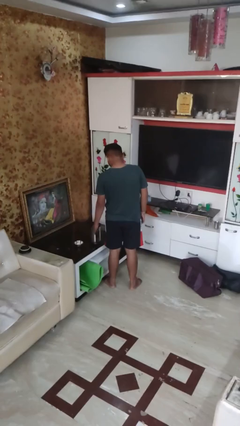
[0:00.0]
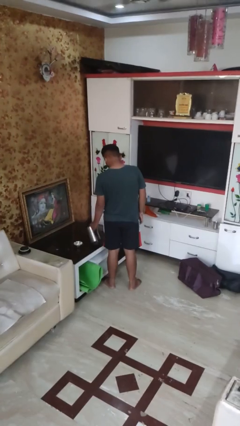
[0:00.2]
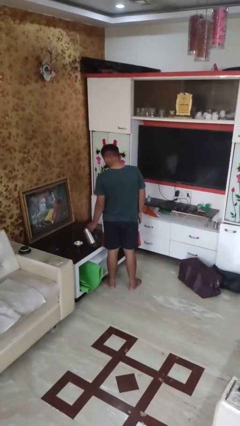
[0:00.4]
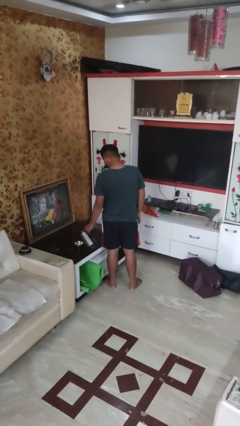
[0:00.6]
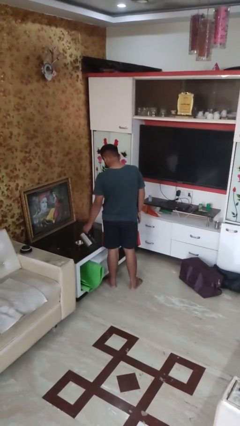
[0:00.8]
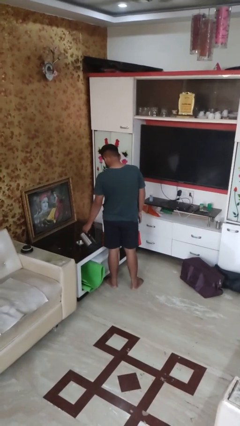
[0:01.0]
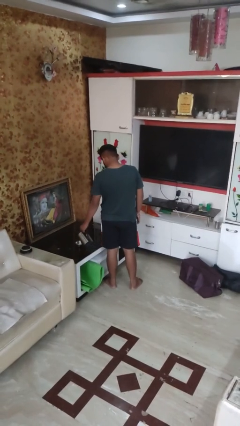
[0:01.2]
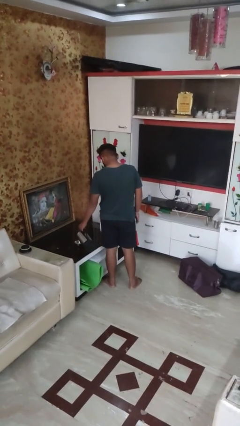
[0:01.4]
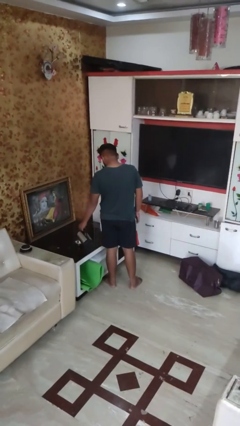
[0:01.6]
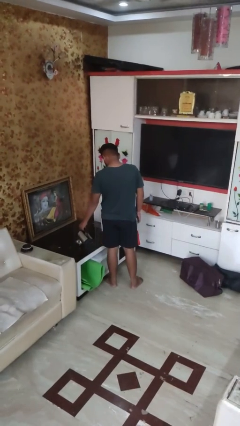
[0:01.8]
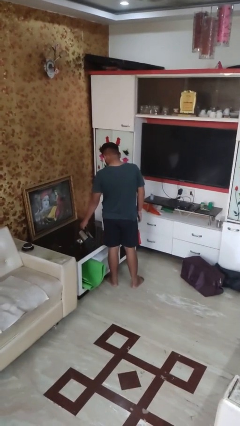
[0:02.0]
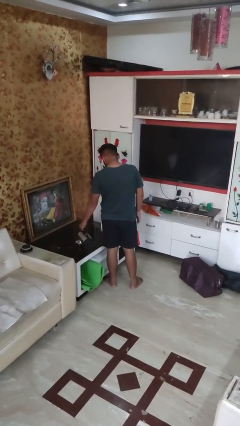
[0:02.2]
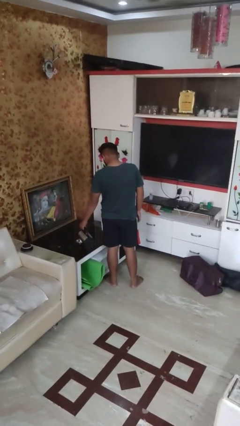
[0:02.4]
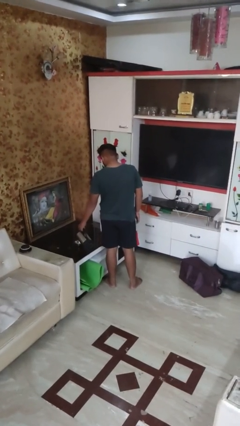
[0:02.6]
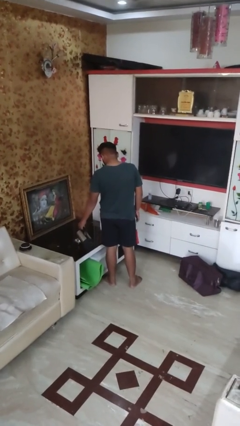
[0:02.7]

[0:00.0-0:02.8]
person pours into bowl

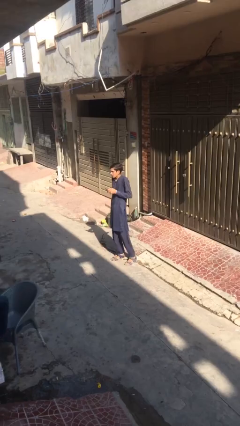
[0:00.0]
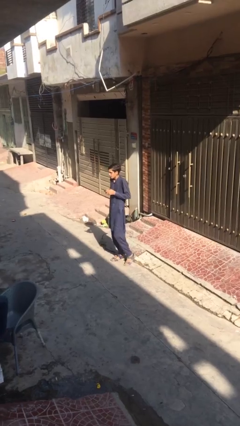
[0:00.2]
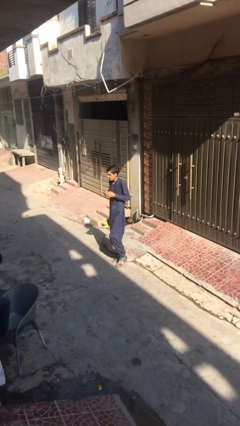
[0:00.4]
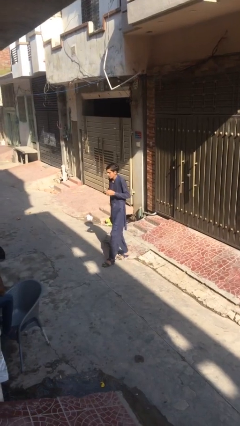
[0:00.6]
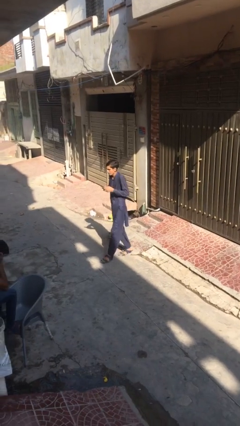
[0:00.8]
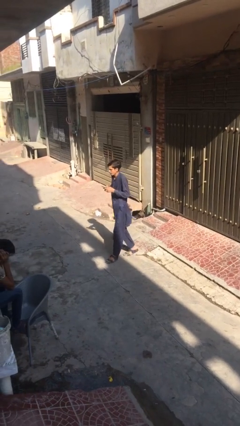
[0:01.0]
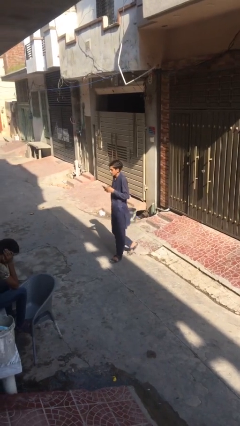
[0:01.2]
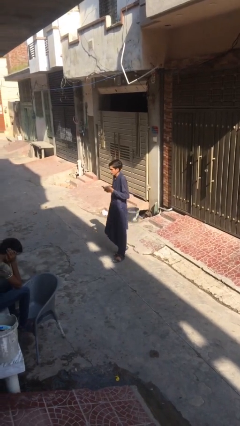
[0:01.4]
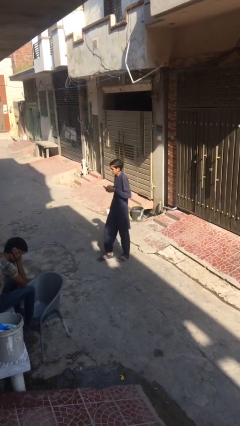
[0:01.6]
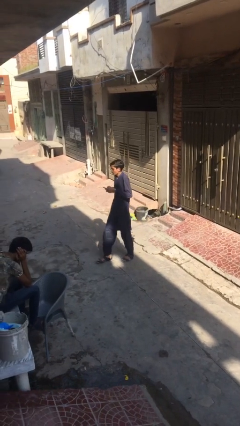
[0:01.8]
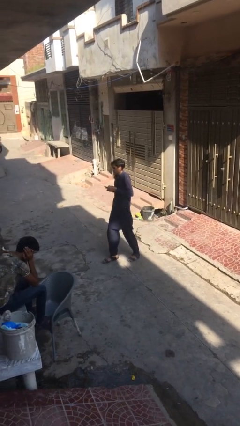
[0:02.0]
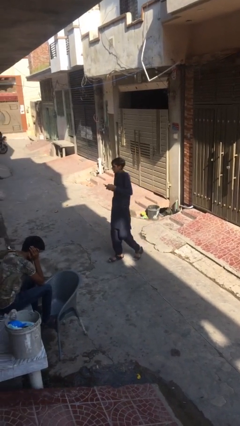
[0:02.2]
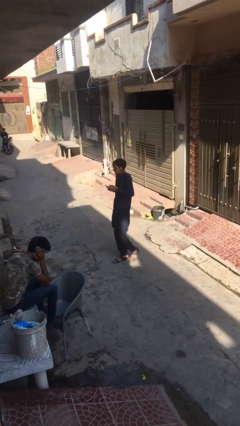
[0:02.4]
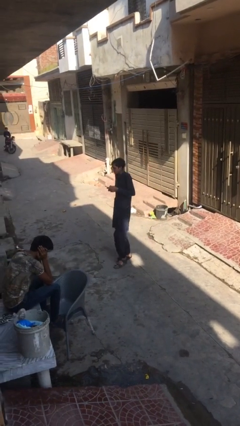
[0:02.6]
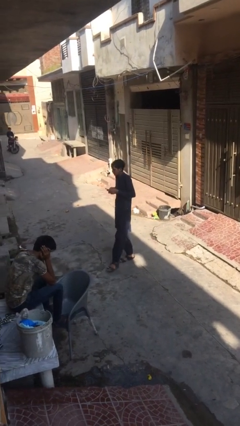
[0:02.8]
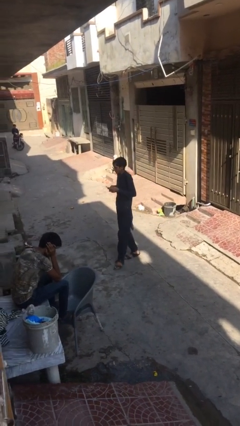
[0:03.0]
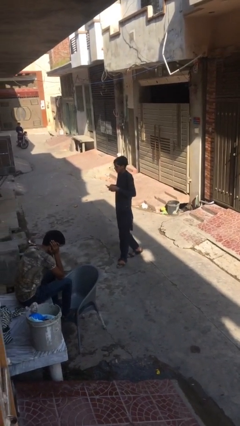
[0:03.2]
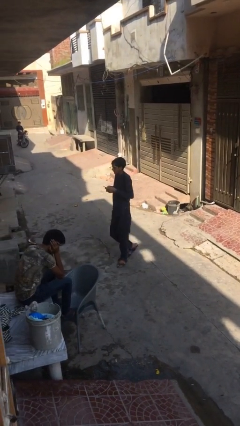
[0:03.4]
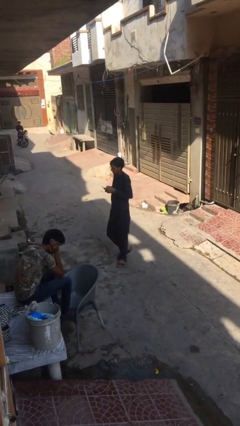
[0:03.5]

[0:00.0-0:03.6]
person texts on phone

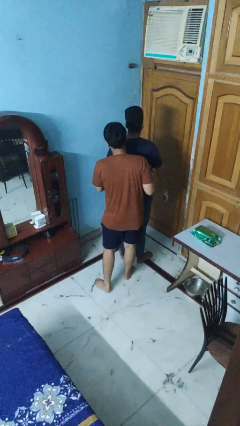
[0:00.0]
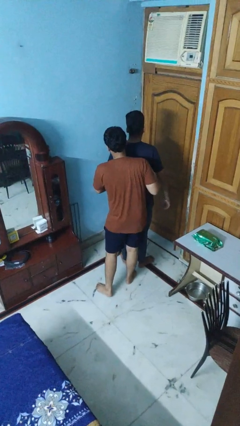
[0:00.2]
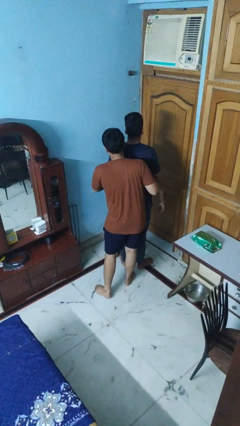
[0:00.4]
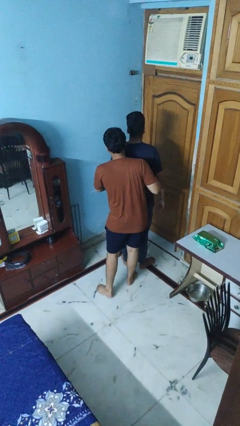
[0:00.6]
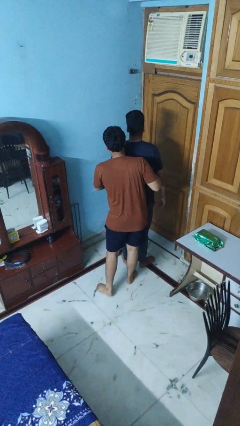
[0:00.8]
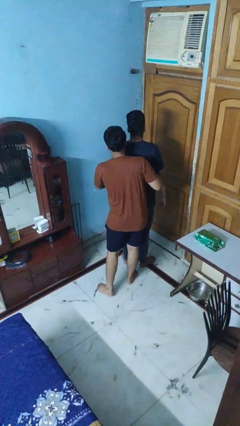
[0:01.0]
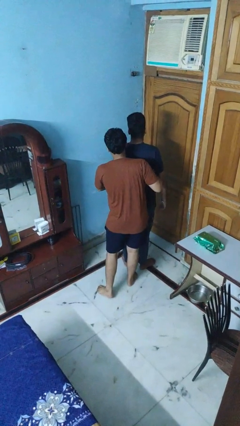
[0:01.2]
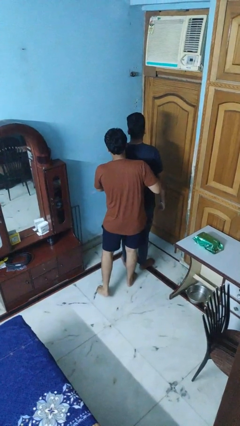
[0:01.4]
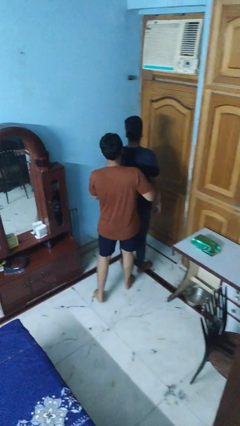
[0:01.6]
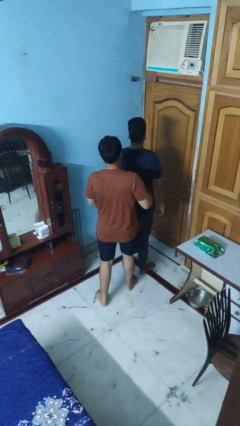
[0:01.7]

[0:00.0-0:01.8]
person hugs person from behind

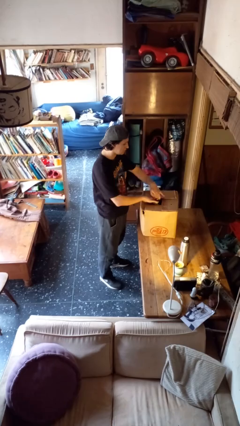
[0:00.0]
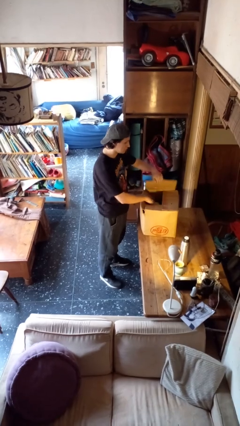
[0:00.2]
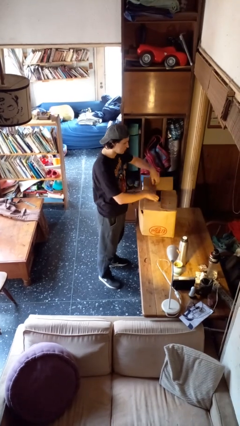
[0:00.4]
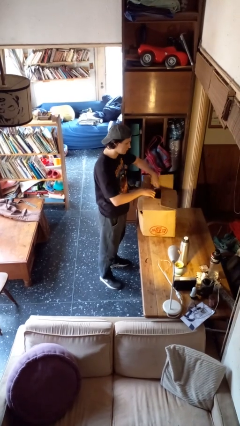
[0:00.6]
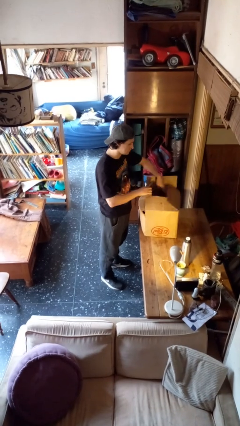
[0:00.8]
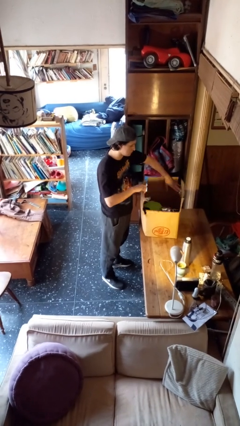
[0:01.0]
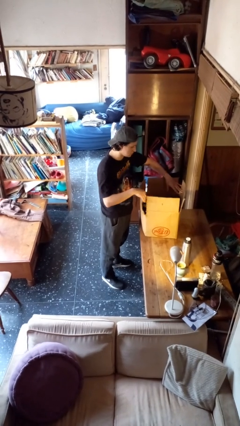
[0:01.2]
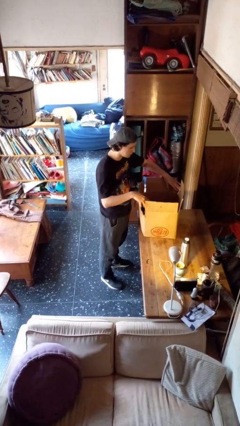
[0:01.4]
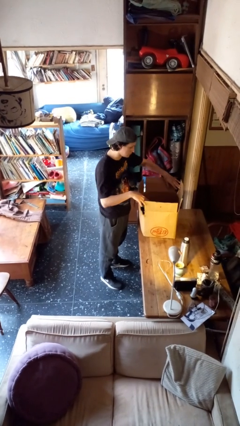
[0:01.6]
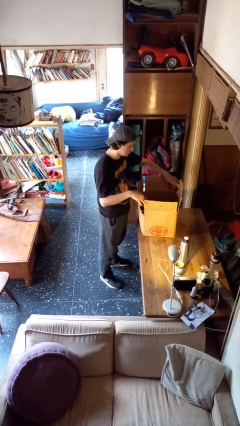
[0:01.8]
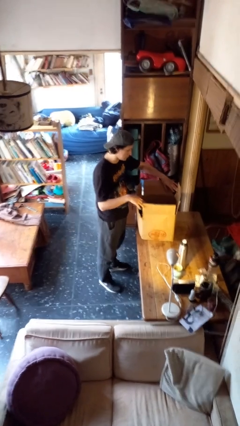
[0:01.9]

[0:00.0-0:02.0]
person opens box

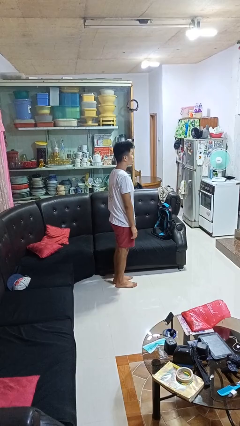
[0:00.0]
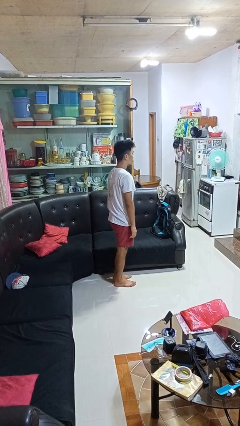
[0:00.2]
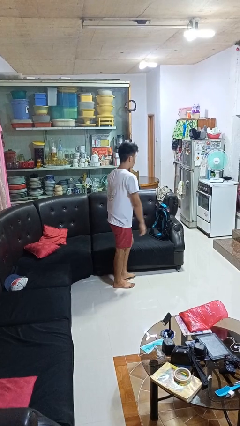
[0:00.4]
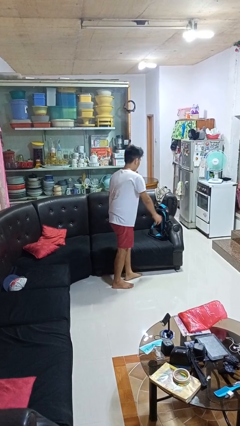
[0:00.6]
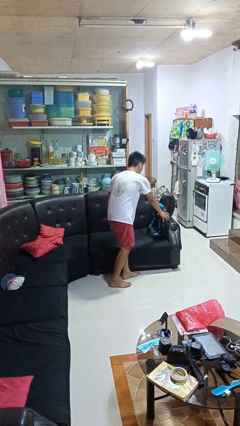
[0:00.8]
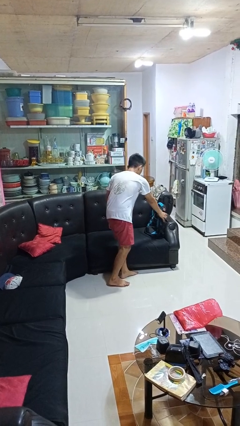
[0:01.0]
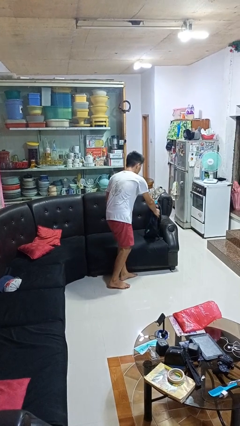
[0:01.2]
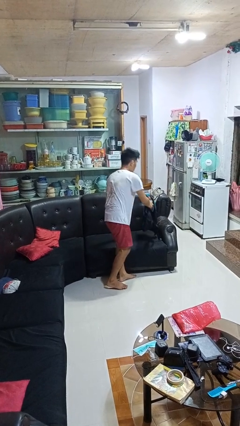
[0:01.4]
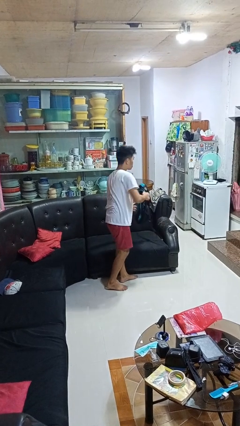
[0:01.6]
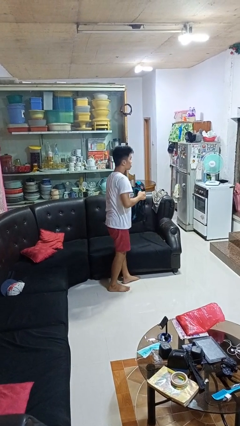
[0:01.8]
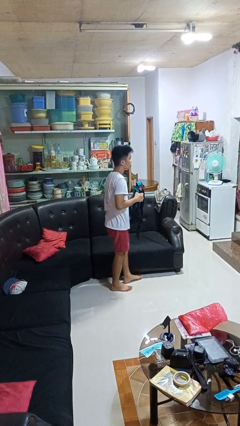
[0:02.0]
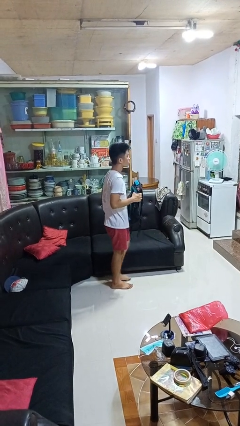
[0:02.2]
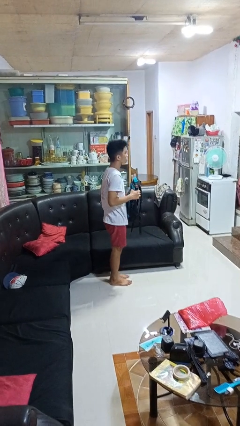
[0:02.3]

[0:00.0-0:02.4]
person picks up object from couch

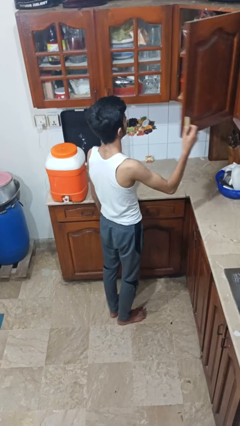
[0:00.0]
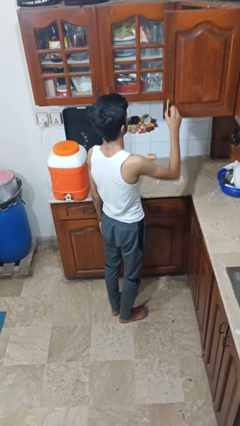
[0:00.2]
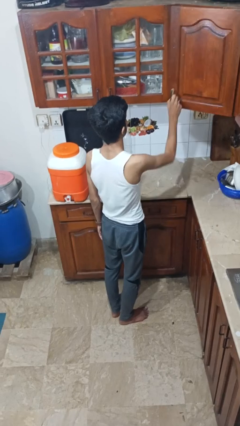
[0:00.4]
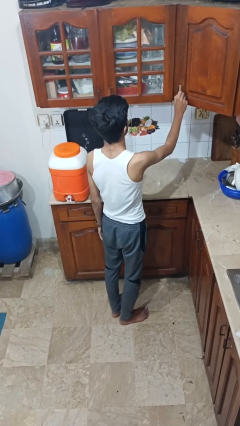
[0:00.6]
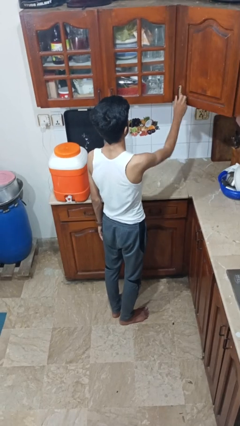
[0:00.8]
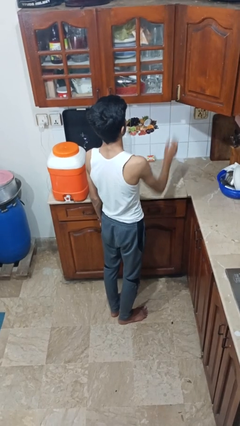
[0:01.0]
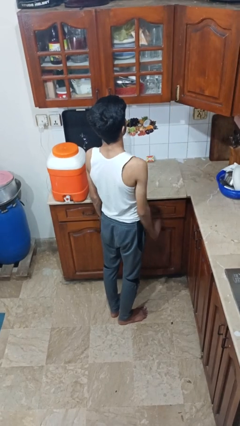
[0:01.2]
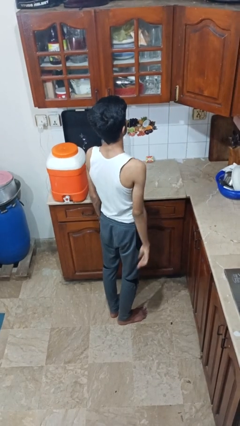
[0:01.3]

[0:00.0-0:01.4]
person closes cabinet

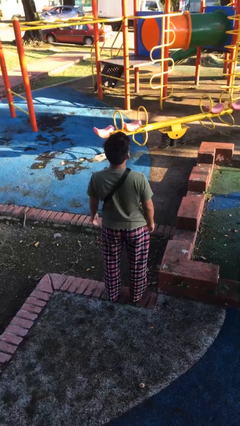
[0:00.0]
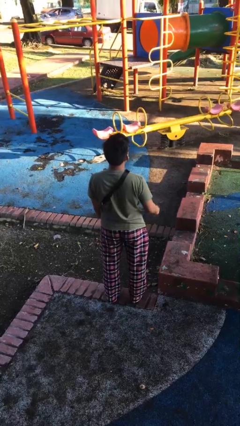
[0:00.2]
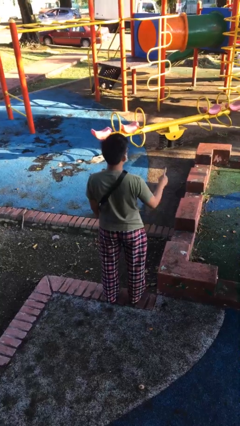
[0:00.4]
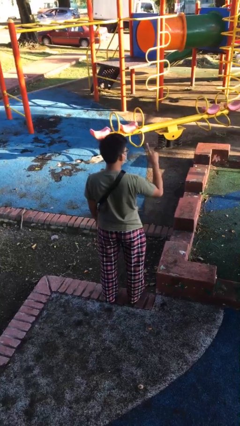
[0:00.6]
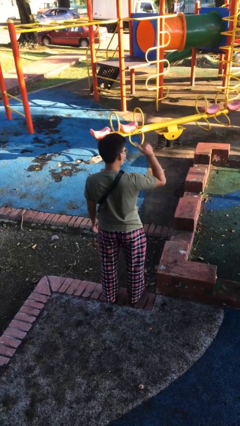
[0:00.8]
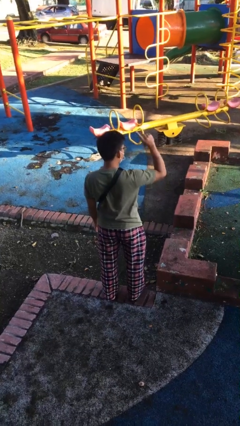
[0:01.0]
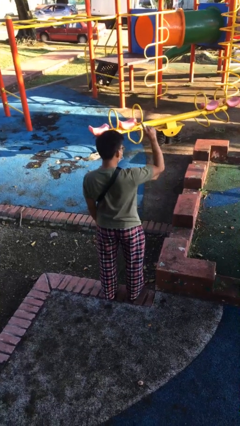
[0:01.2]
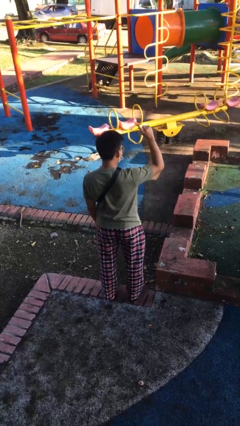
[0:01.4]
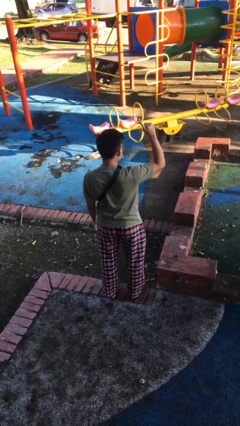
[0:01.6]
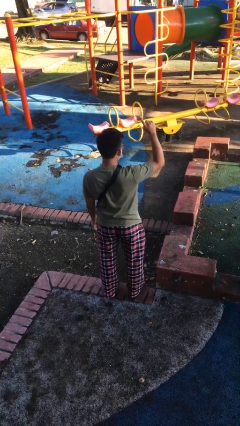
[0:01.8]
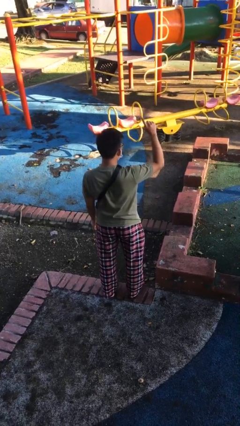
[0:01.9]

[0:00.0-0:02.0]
person gestures number one

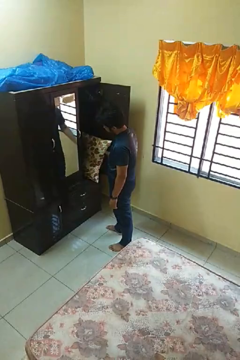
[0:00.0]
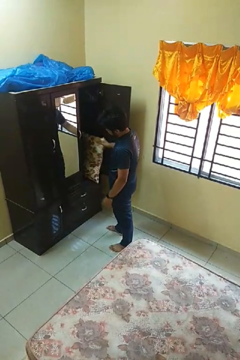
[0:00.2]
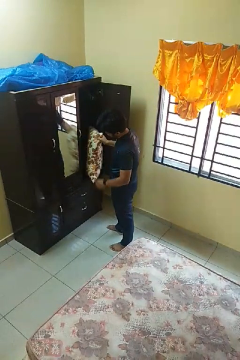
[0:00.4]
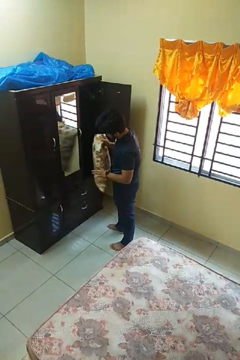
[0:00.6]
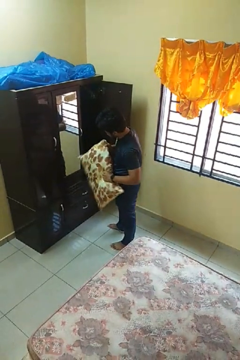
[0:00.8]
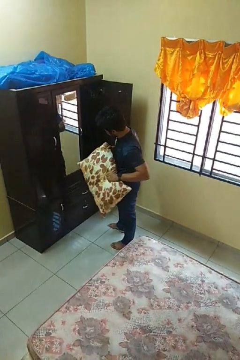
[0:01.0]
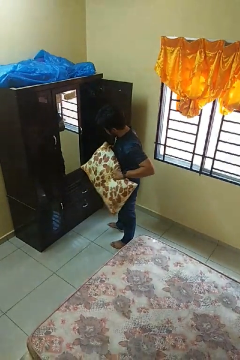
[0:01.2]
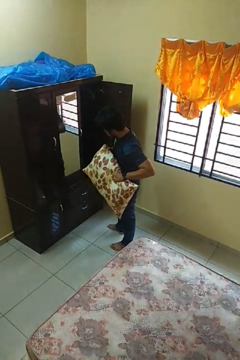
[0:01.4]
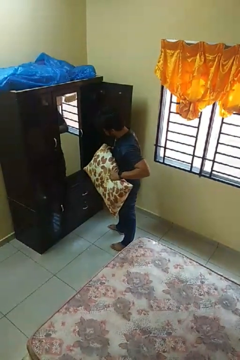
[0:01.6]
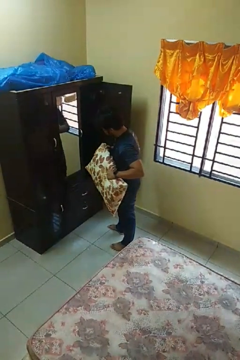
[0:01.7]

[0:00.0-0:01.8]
person picks up object from cabinet
